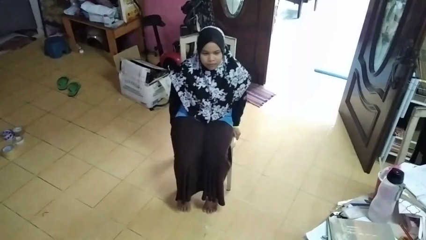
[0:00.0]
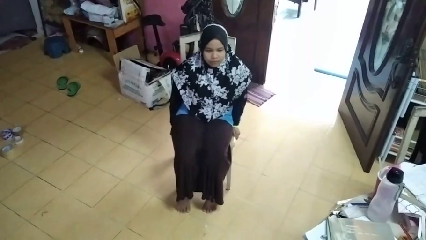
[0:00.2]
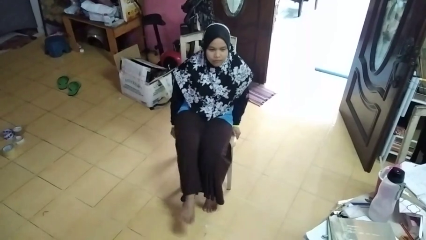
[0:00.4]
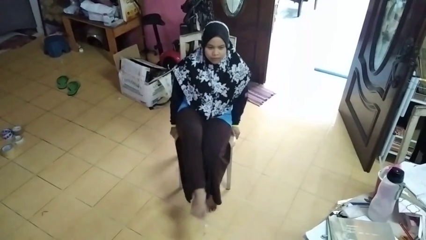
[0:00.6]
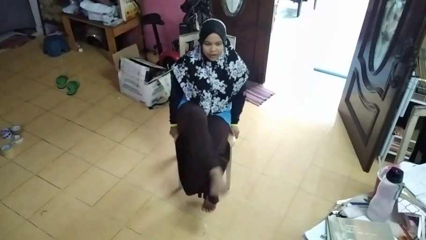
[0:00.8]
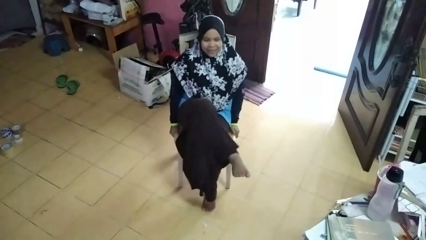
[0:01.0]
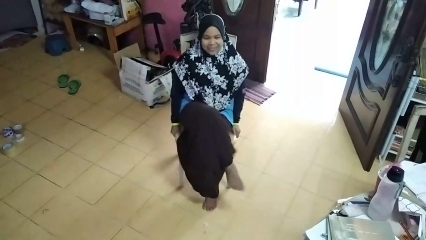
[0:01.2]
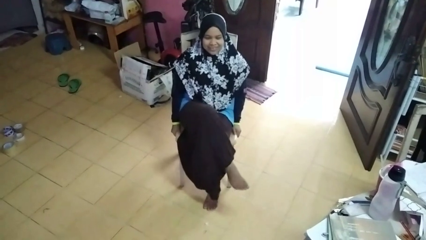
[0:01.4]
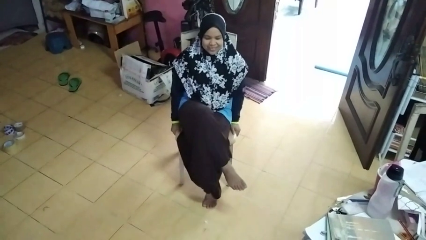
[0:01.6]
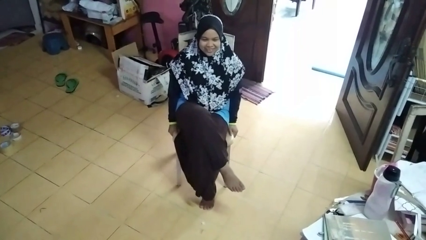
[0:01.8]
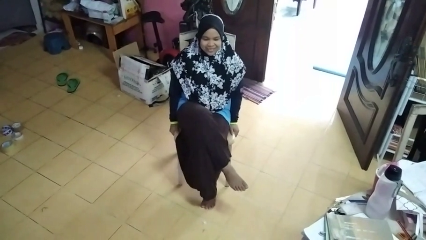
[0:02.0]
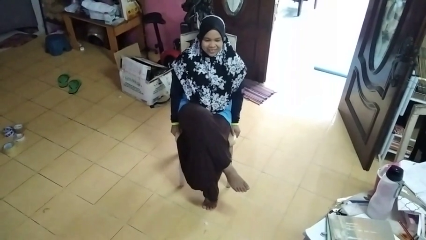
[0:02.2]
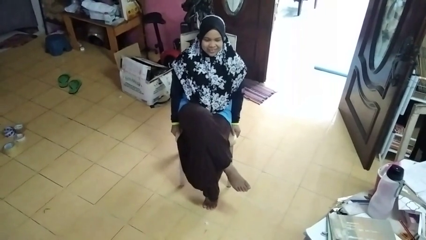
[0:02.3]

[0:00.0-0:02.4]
person crosses legs

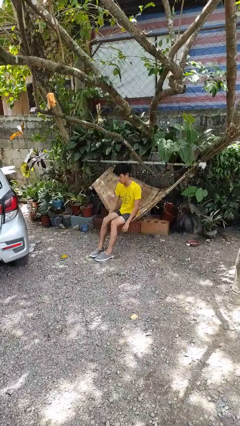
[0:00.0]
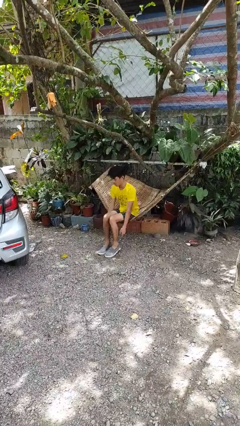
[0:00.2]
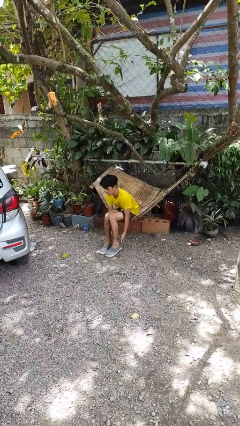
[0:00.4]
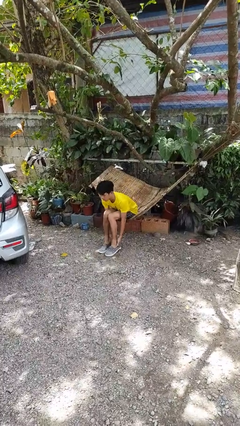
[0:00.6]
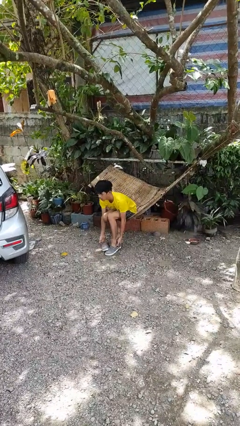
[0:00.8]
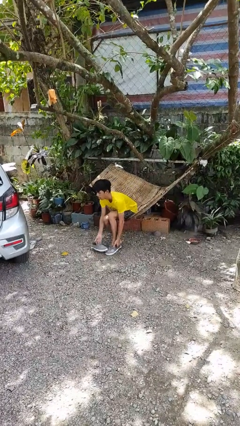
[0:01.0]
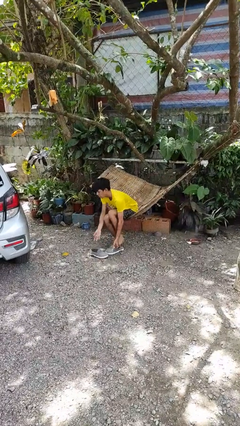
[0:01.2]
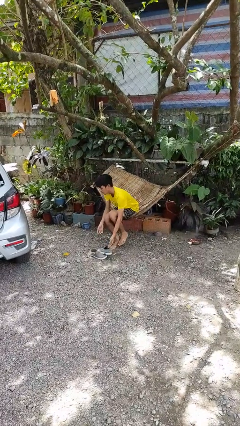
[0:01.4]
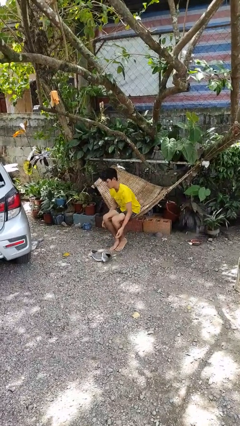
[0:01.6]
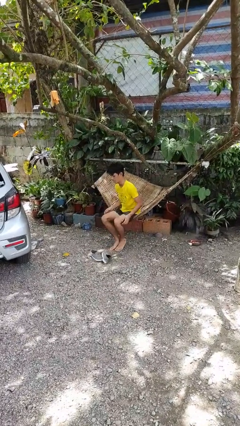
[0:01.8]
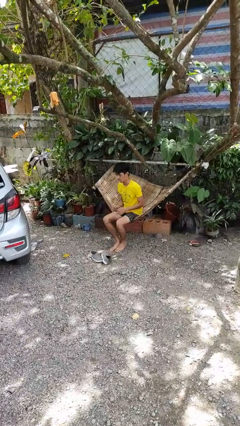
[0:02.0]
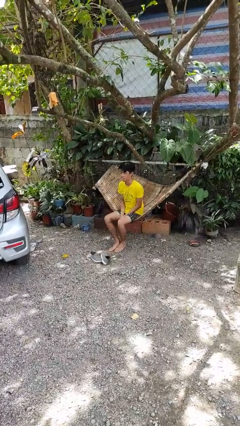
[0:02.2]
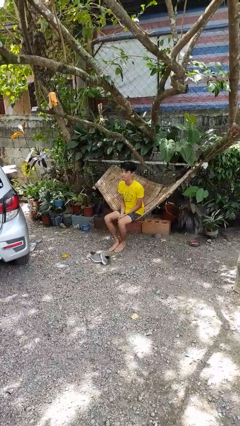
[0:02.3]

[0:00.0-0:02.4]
person takes off shoes

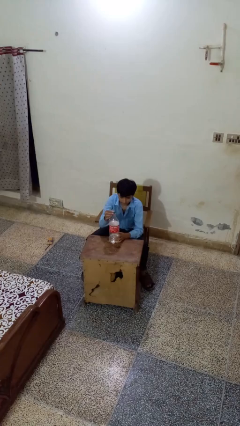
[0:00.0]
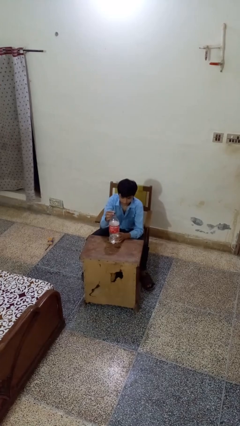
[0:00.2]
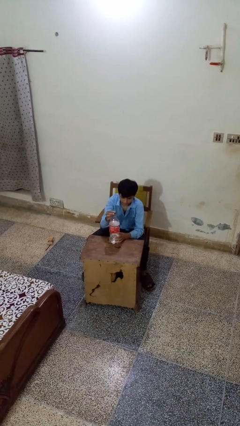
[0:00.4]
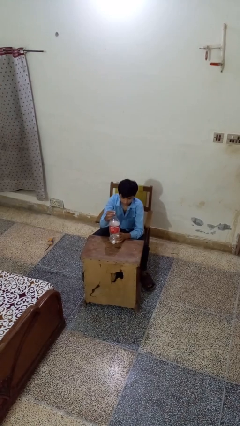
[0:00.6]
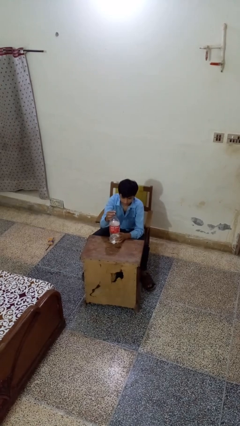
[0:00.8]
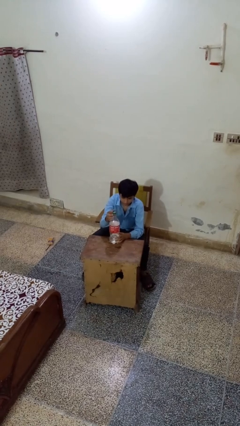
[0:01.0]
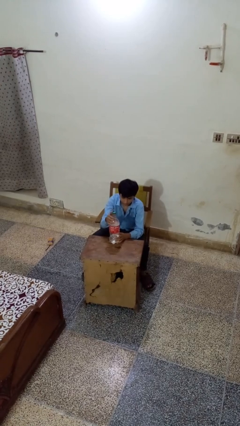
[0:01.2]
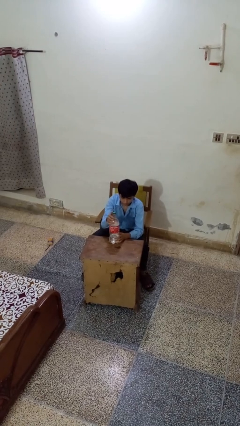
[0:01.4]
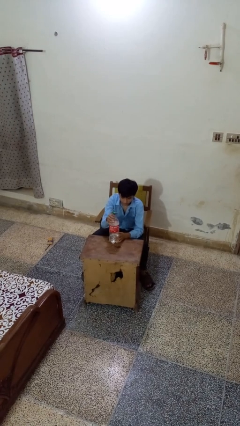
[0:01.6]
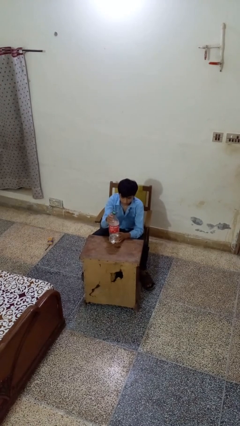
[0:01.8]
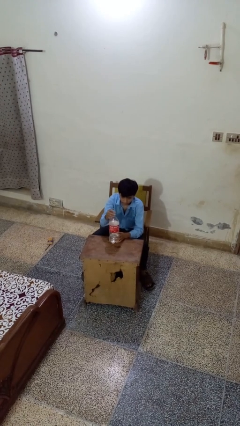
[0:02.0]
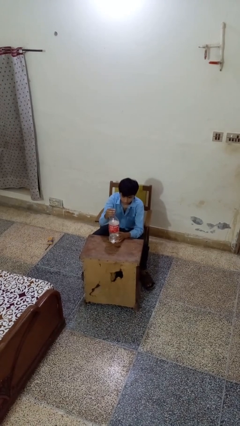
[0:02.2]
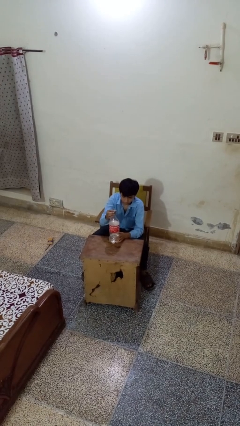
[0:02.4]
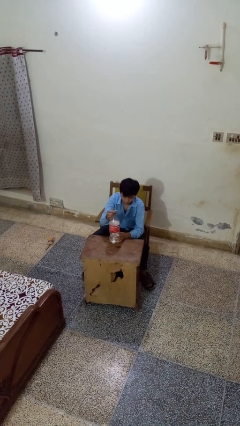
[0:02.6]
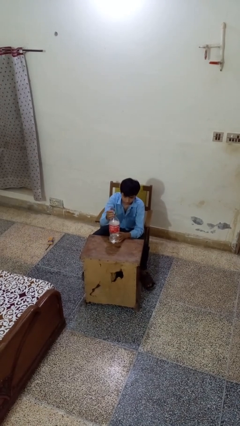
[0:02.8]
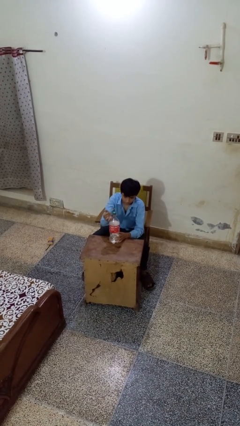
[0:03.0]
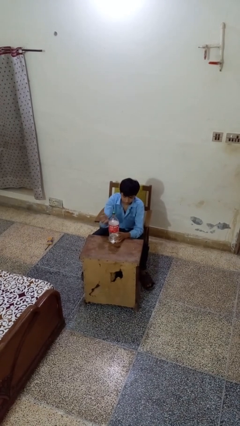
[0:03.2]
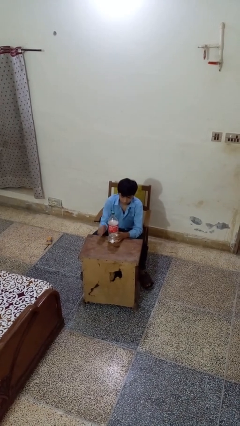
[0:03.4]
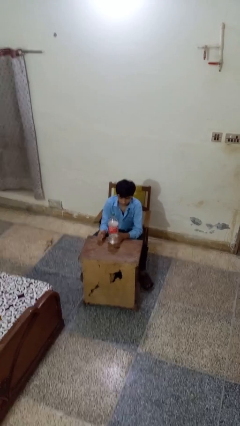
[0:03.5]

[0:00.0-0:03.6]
person screws lid to bottle

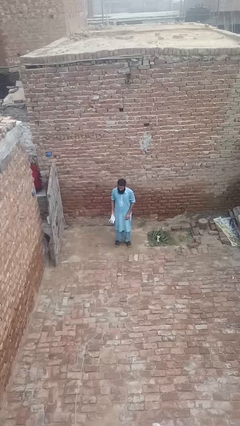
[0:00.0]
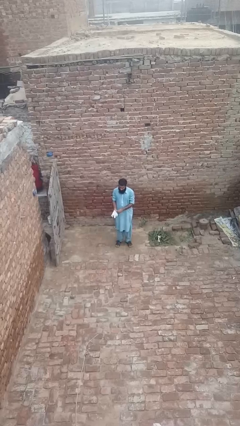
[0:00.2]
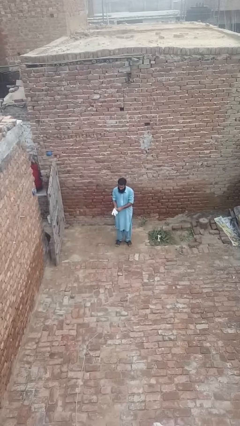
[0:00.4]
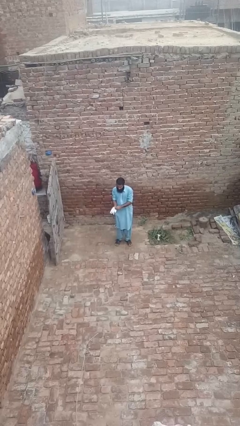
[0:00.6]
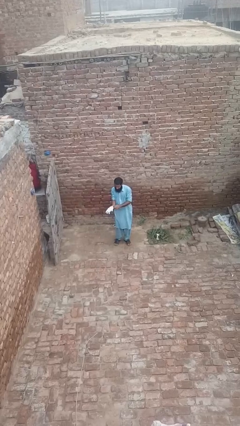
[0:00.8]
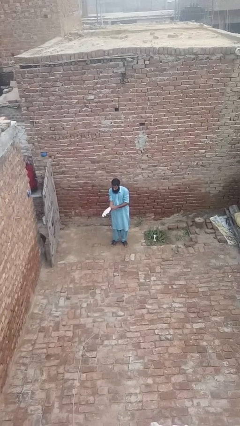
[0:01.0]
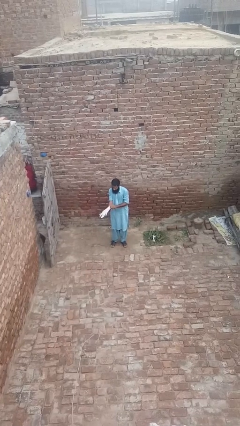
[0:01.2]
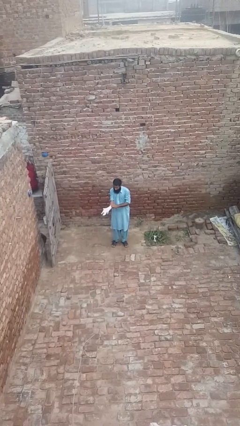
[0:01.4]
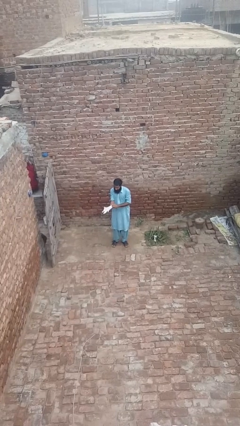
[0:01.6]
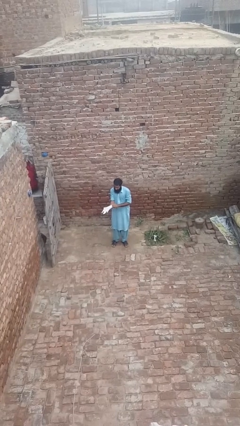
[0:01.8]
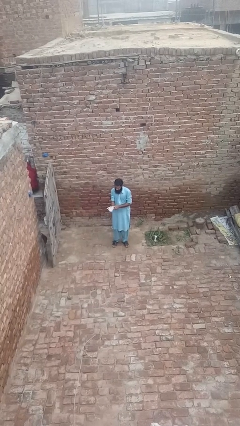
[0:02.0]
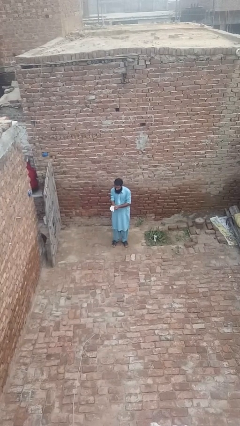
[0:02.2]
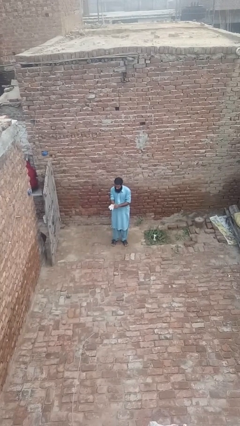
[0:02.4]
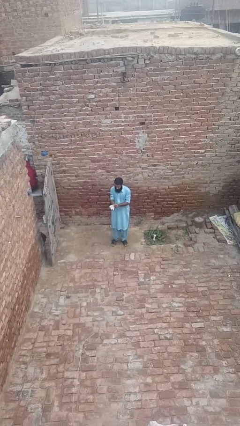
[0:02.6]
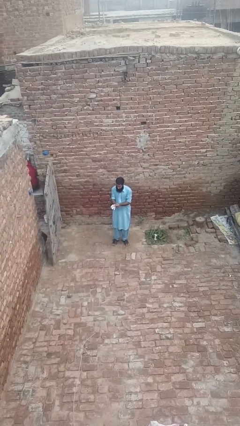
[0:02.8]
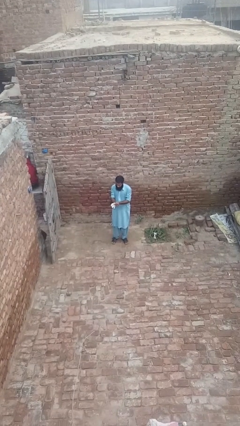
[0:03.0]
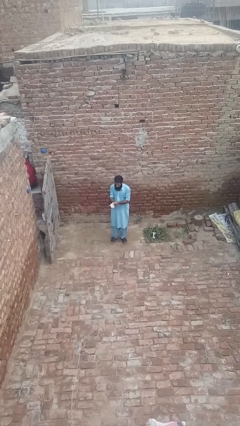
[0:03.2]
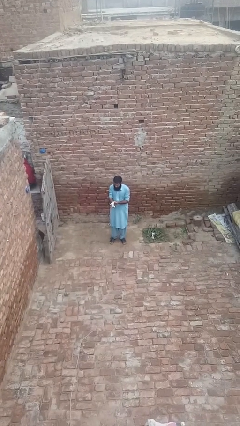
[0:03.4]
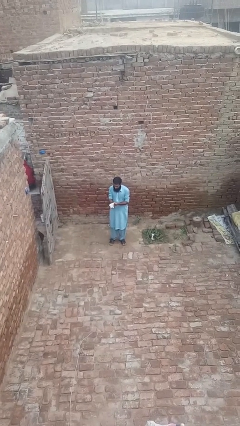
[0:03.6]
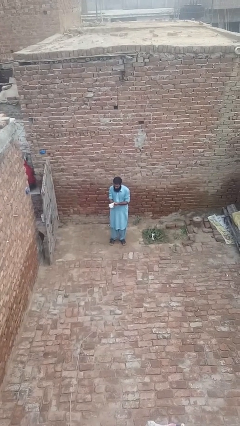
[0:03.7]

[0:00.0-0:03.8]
person puts on gloves

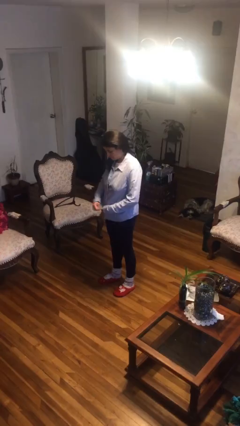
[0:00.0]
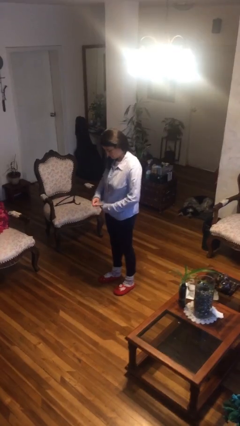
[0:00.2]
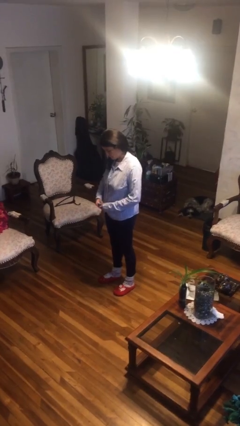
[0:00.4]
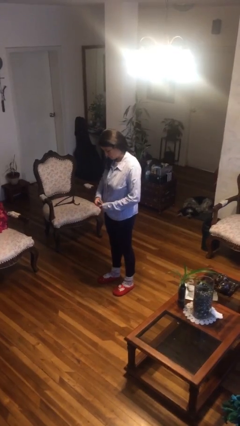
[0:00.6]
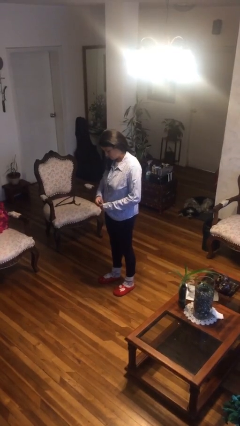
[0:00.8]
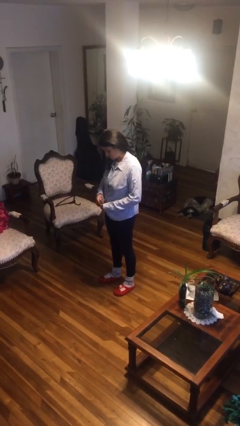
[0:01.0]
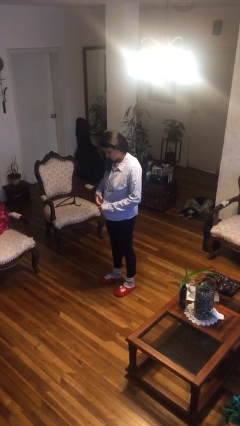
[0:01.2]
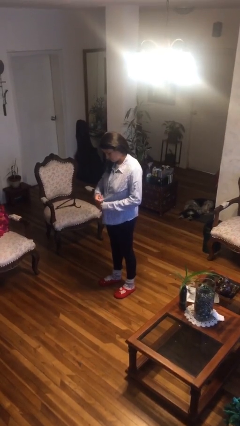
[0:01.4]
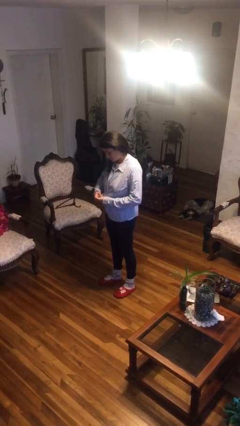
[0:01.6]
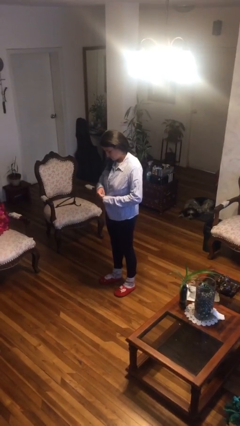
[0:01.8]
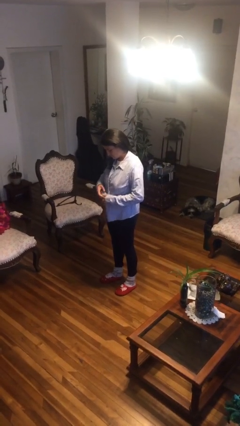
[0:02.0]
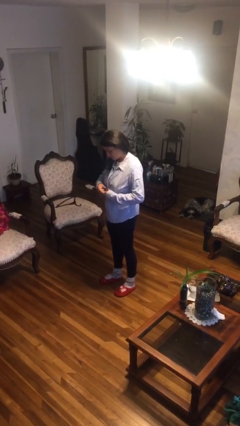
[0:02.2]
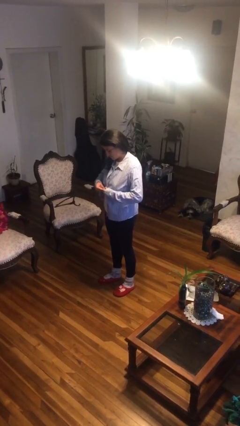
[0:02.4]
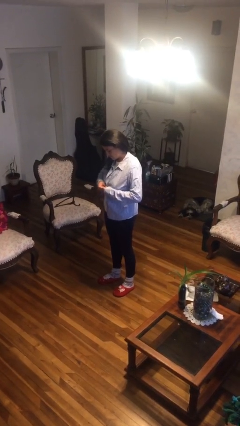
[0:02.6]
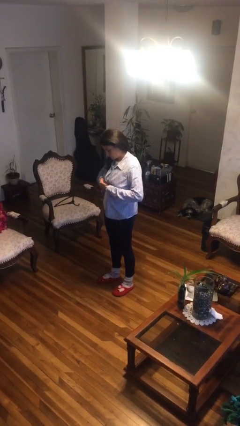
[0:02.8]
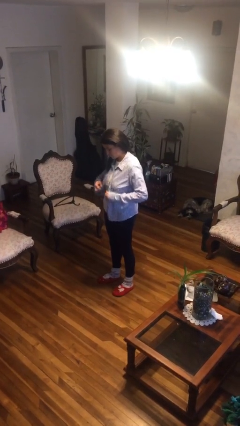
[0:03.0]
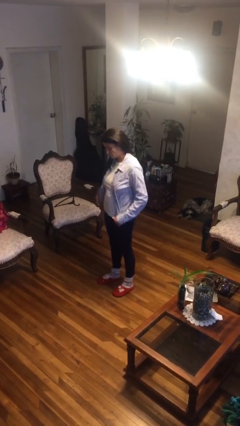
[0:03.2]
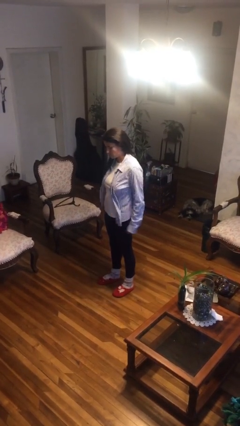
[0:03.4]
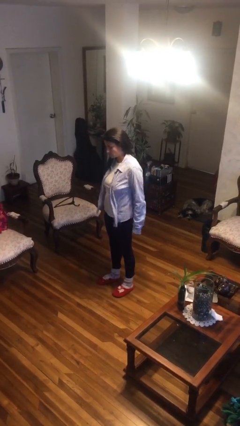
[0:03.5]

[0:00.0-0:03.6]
person unbuttons shirt

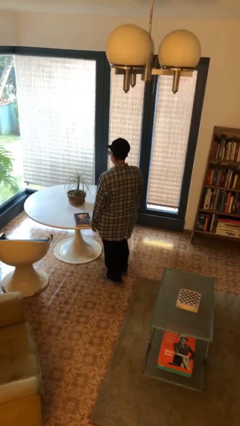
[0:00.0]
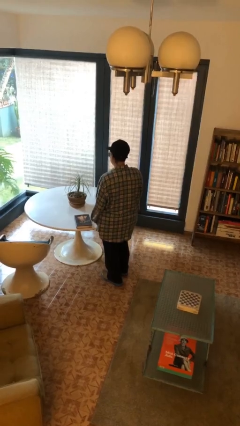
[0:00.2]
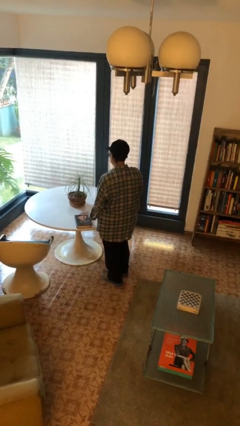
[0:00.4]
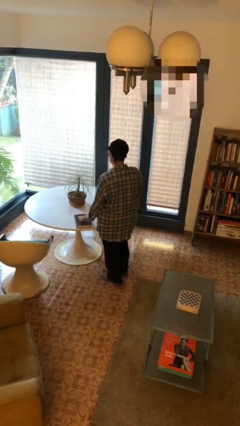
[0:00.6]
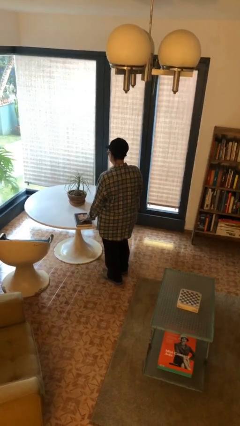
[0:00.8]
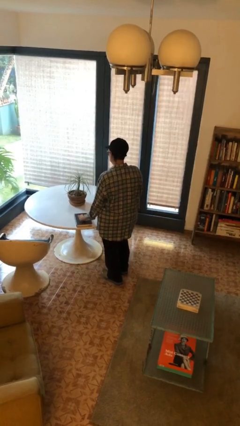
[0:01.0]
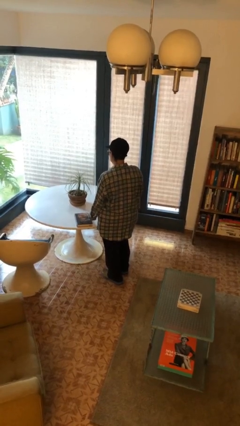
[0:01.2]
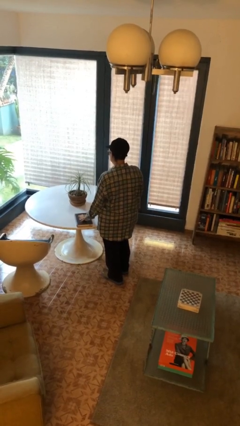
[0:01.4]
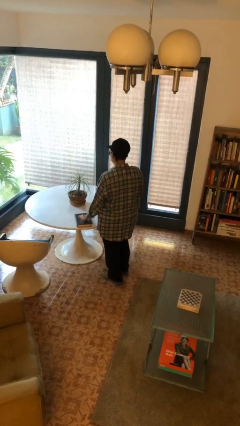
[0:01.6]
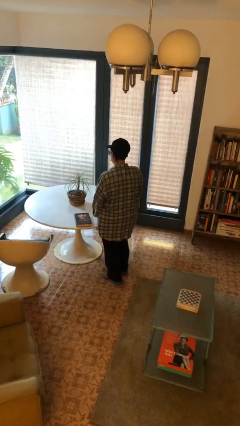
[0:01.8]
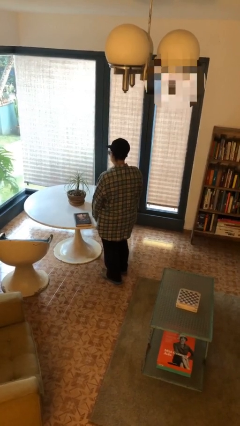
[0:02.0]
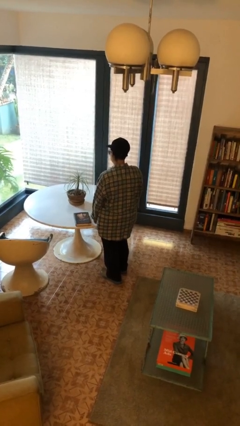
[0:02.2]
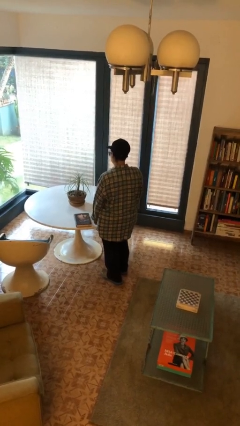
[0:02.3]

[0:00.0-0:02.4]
person taps object with finger
